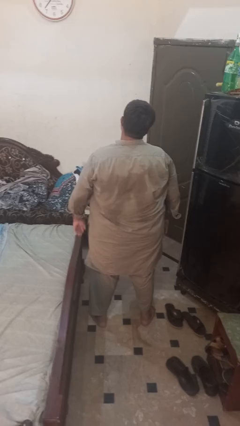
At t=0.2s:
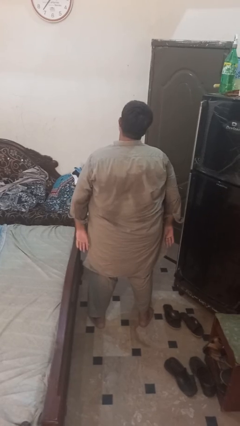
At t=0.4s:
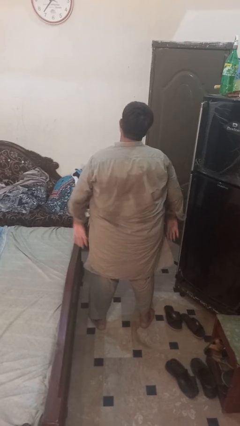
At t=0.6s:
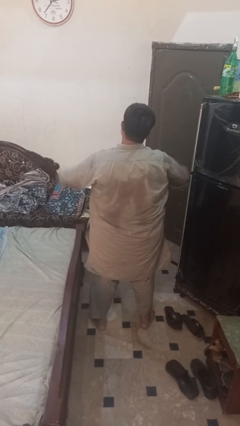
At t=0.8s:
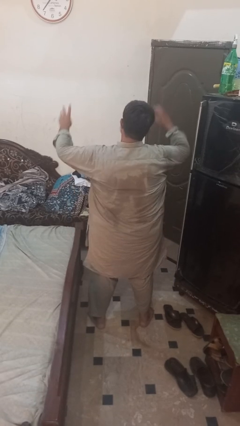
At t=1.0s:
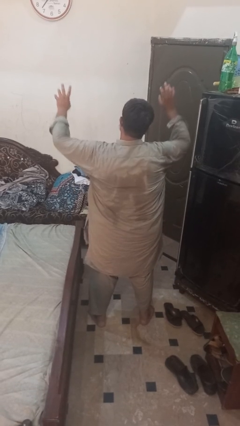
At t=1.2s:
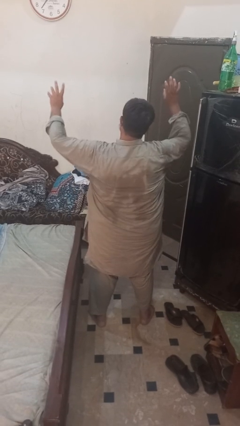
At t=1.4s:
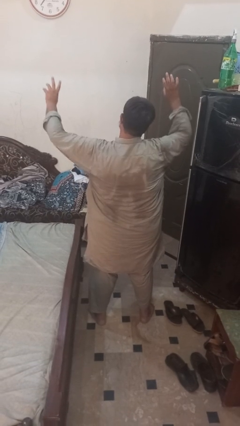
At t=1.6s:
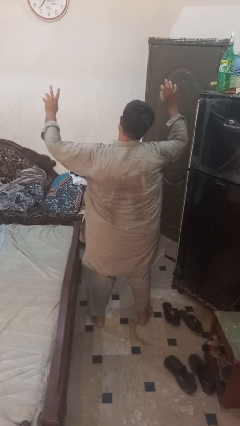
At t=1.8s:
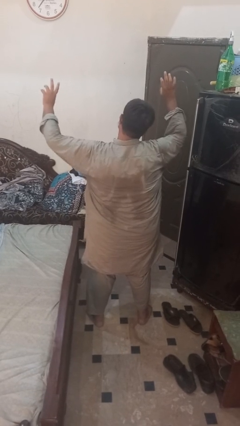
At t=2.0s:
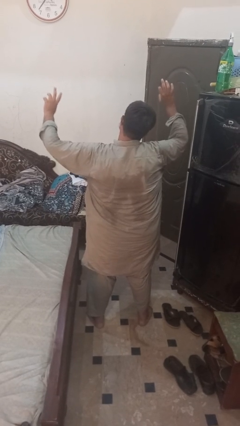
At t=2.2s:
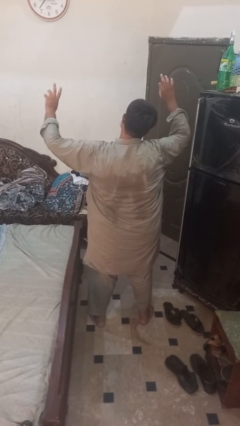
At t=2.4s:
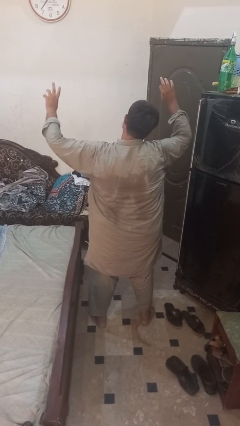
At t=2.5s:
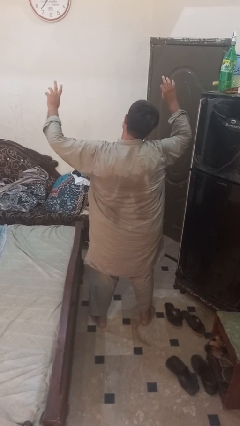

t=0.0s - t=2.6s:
person dances in place

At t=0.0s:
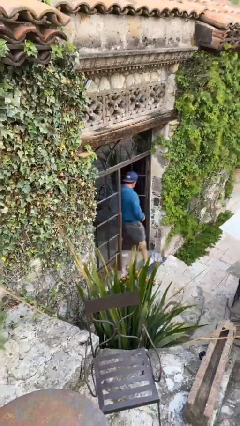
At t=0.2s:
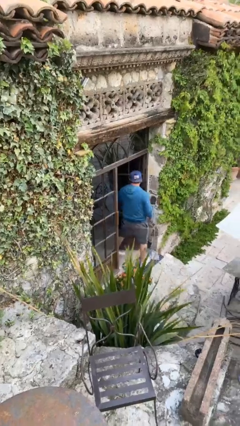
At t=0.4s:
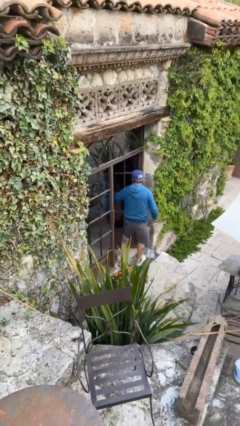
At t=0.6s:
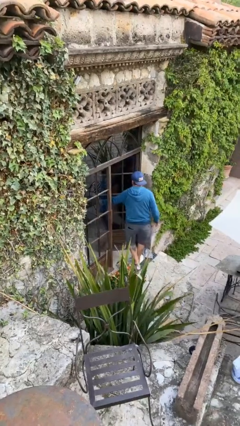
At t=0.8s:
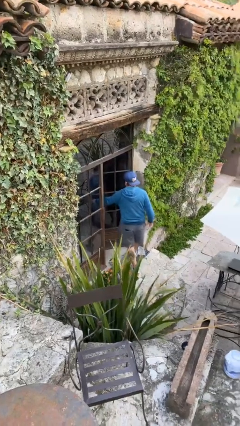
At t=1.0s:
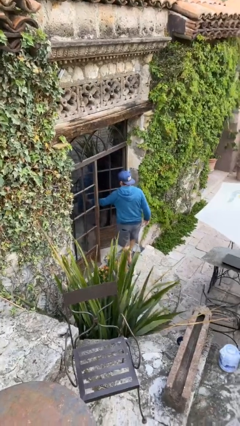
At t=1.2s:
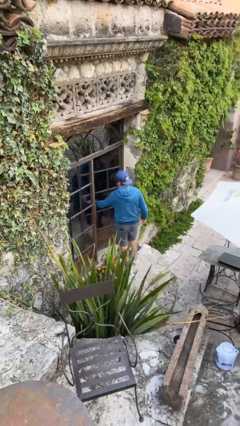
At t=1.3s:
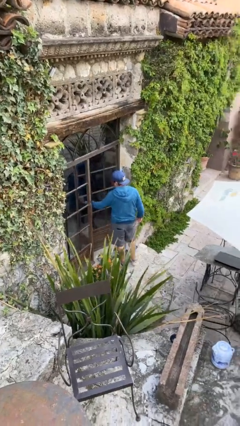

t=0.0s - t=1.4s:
person enters scene through structure

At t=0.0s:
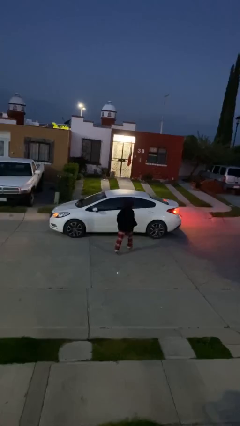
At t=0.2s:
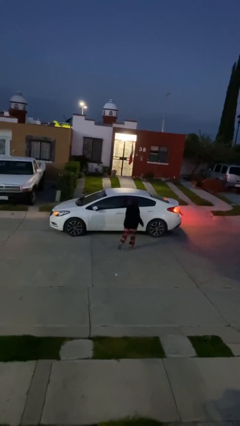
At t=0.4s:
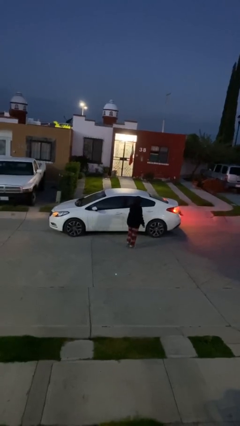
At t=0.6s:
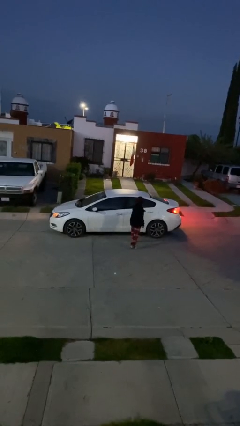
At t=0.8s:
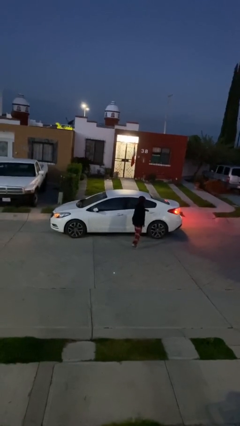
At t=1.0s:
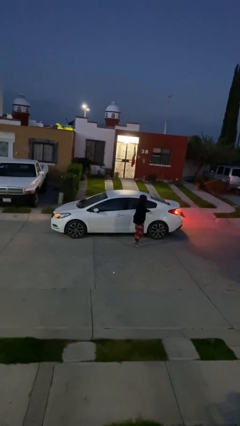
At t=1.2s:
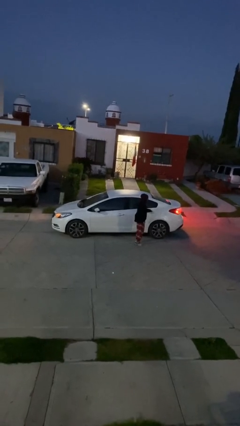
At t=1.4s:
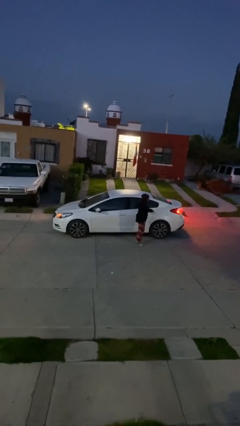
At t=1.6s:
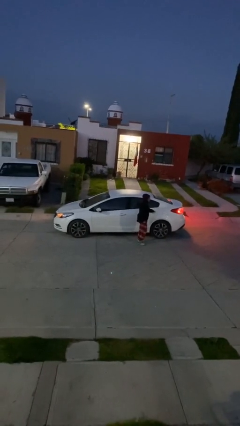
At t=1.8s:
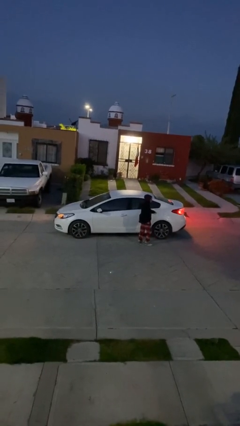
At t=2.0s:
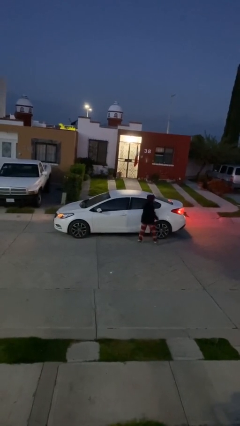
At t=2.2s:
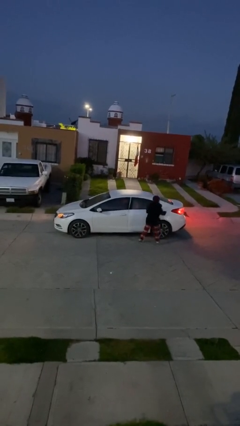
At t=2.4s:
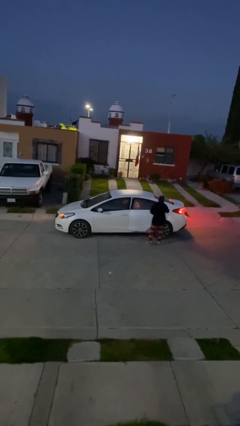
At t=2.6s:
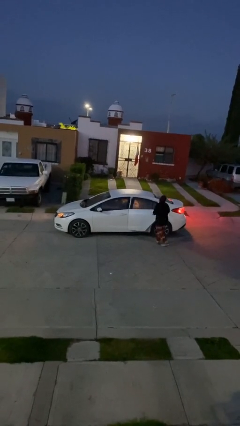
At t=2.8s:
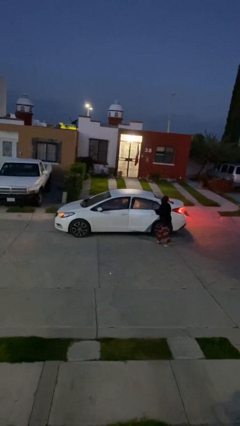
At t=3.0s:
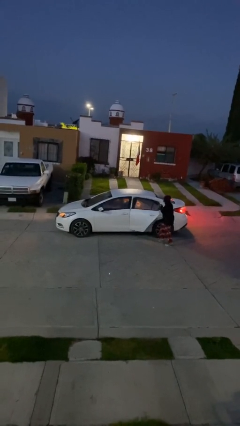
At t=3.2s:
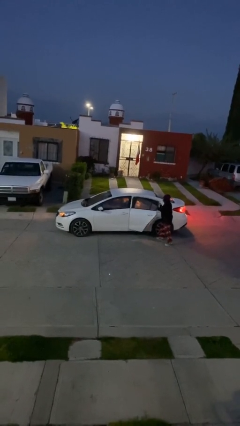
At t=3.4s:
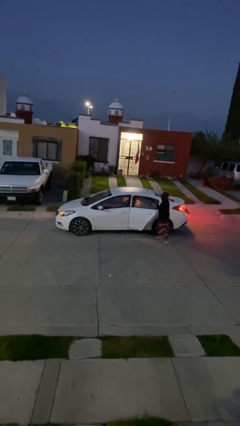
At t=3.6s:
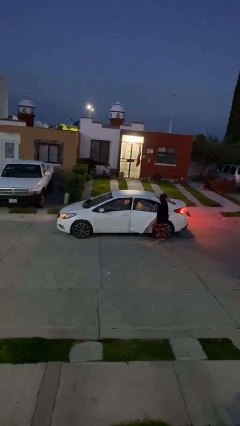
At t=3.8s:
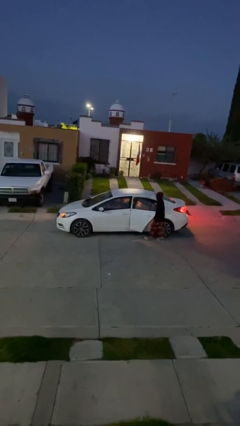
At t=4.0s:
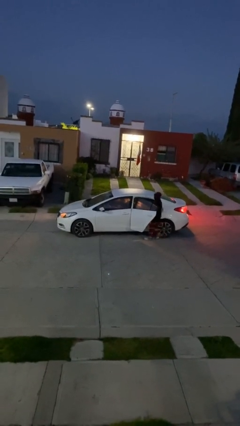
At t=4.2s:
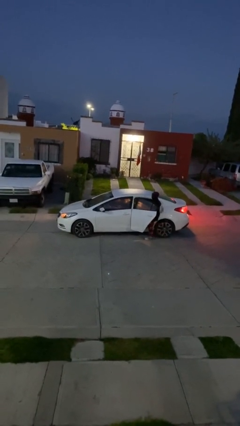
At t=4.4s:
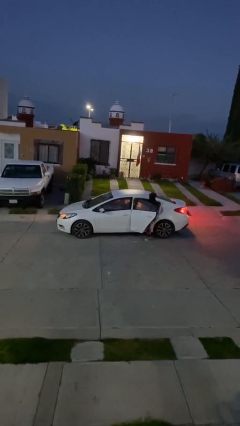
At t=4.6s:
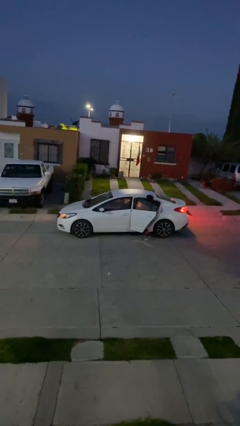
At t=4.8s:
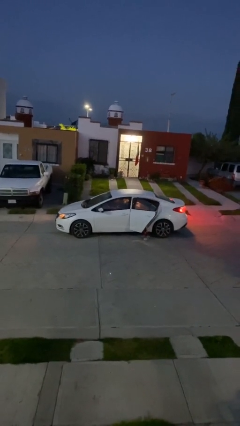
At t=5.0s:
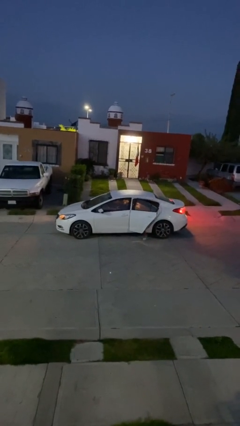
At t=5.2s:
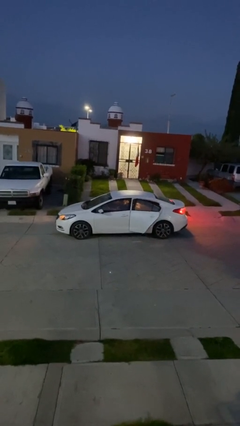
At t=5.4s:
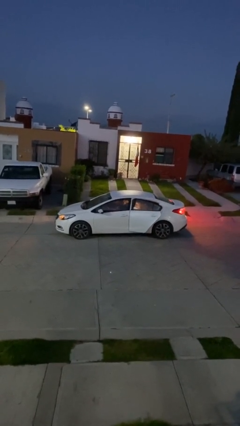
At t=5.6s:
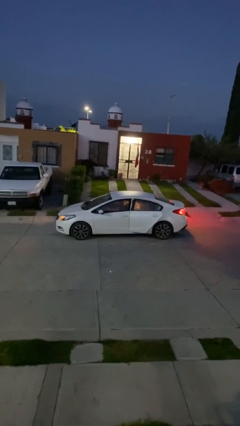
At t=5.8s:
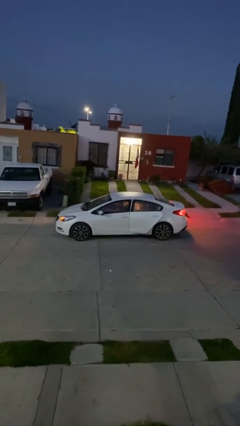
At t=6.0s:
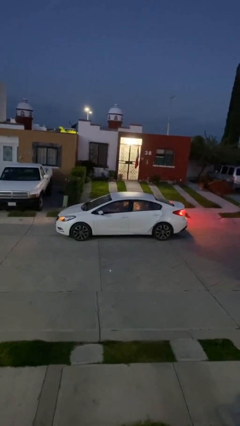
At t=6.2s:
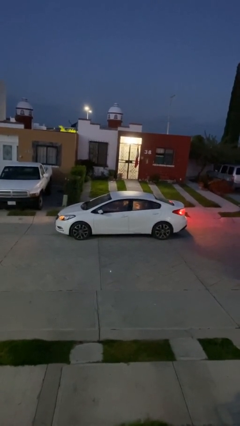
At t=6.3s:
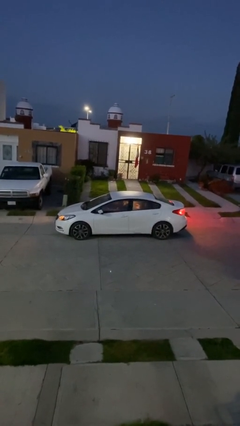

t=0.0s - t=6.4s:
car picks up person

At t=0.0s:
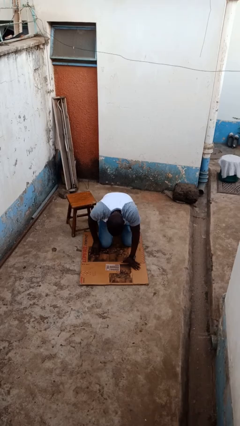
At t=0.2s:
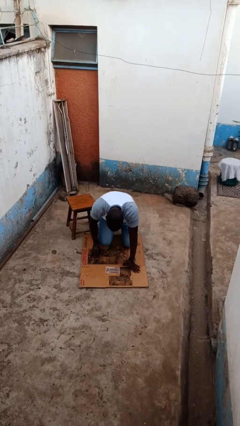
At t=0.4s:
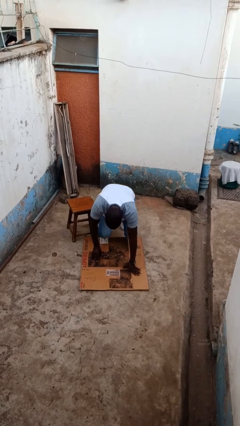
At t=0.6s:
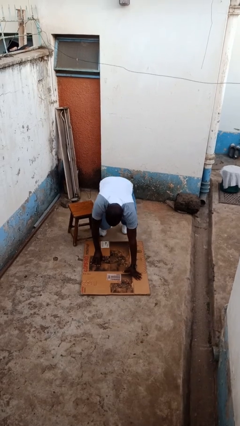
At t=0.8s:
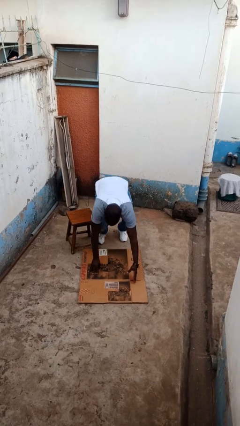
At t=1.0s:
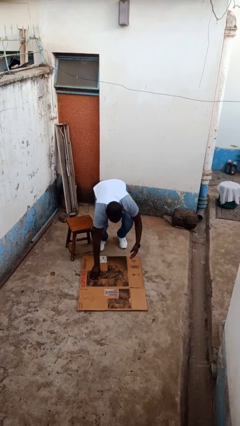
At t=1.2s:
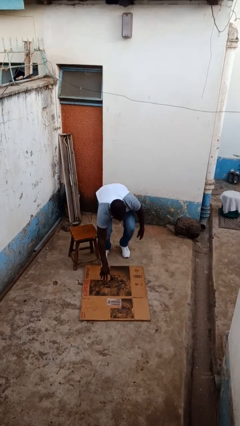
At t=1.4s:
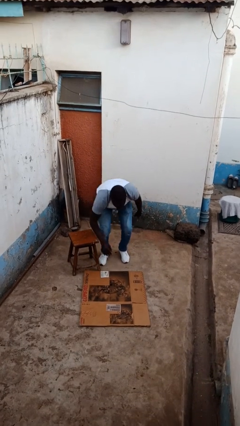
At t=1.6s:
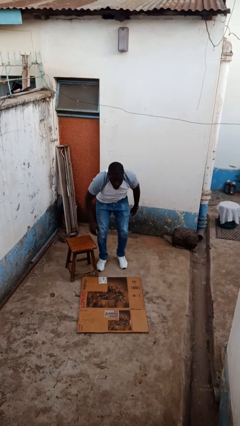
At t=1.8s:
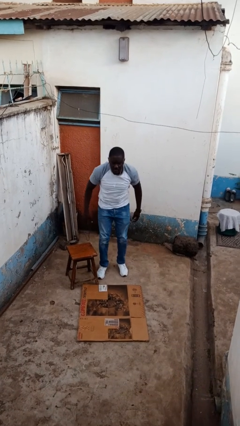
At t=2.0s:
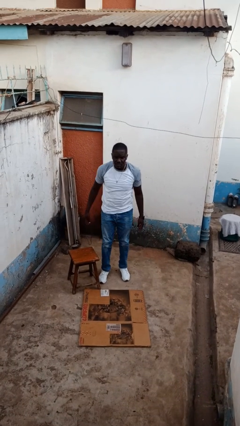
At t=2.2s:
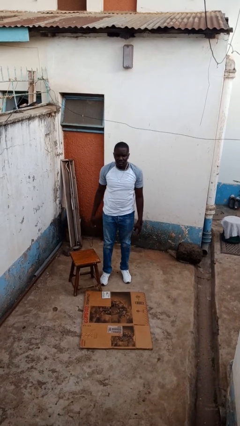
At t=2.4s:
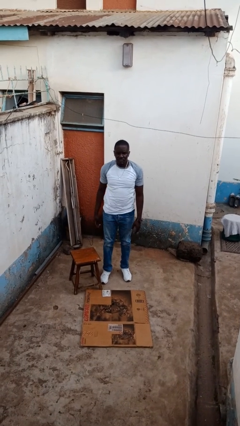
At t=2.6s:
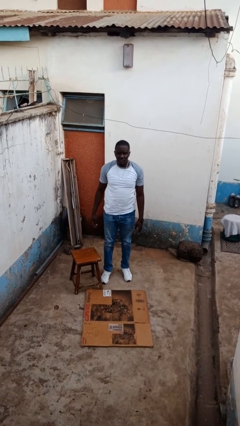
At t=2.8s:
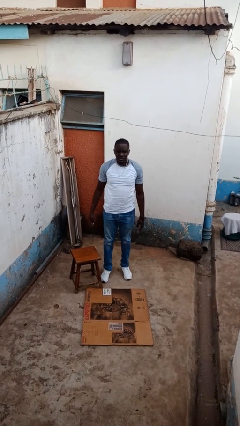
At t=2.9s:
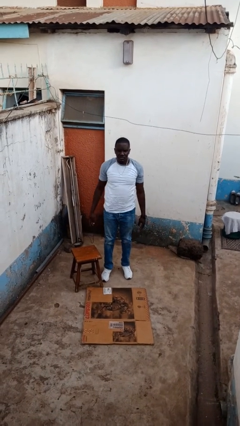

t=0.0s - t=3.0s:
person stands up from floor

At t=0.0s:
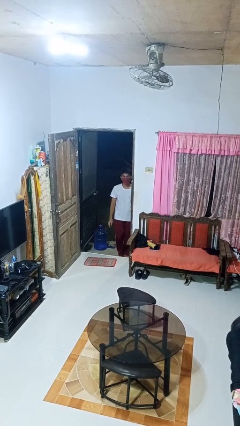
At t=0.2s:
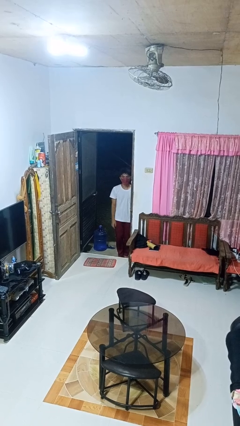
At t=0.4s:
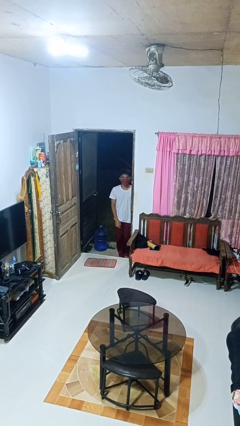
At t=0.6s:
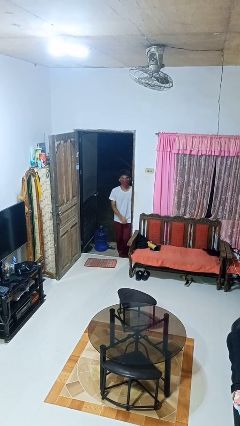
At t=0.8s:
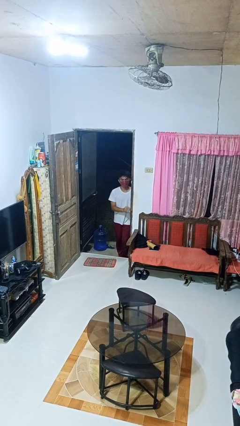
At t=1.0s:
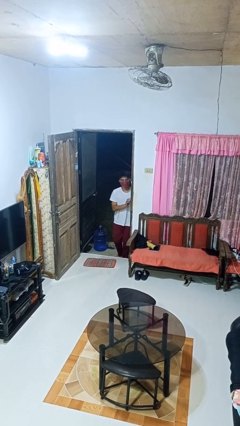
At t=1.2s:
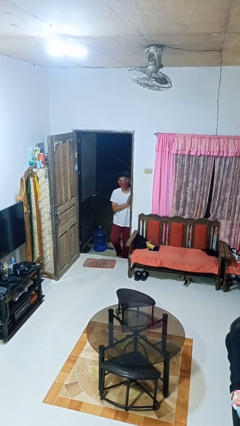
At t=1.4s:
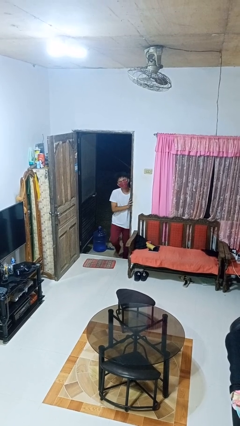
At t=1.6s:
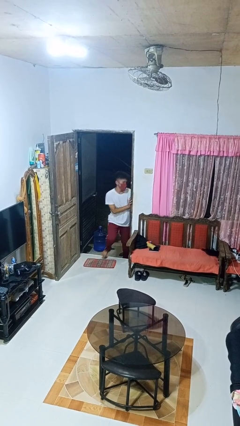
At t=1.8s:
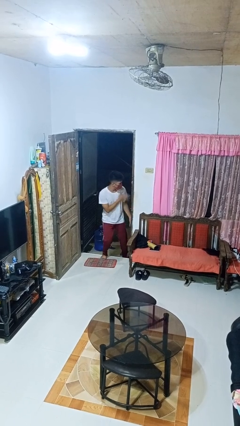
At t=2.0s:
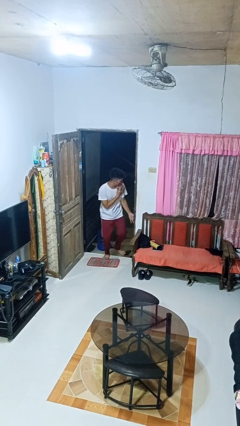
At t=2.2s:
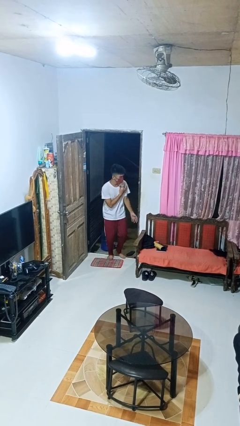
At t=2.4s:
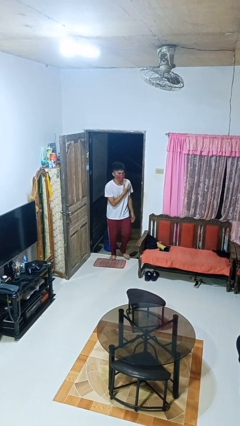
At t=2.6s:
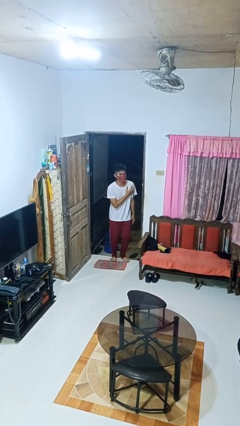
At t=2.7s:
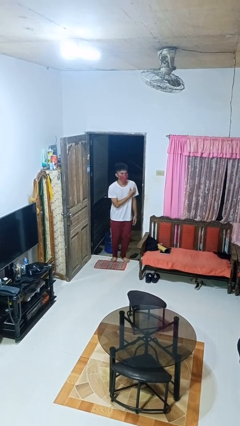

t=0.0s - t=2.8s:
person bumps into wall

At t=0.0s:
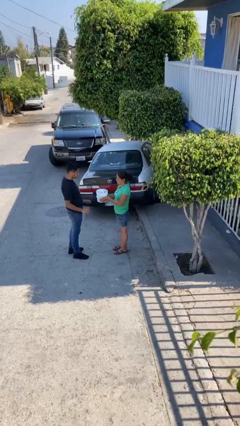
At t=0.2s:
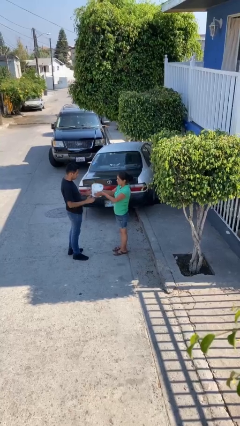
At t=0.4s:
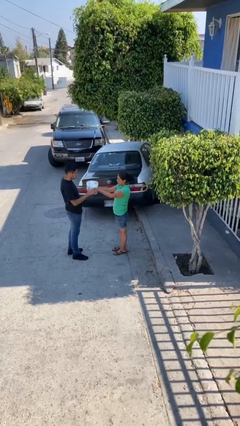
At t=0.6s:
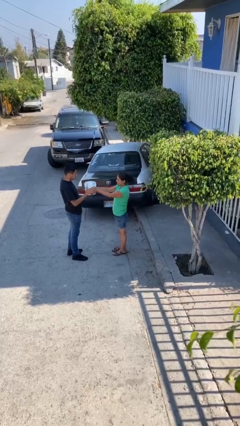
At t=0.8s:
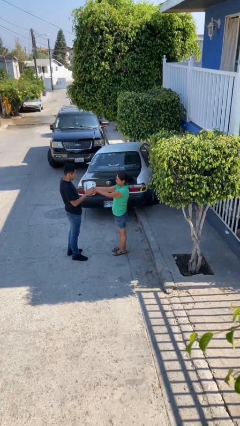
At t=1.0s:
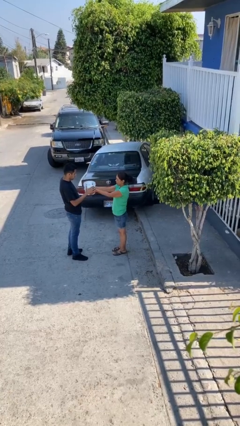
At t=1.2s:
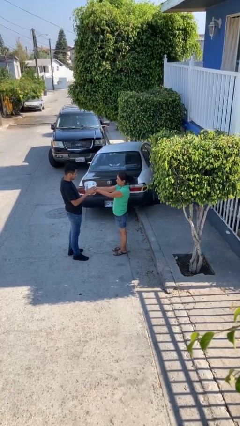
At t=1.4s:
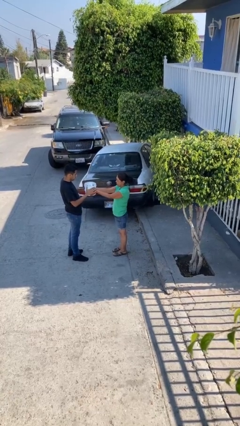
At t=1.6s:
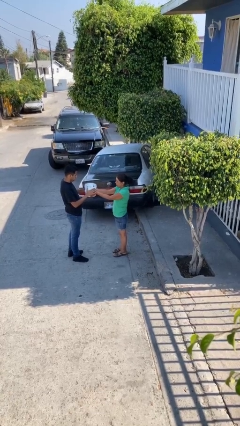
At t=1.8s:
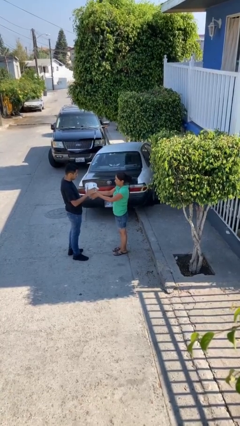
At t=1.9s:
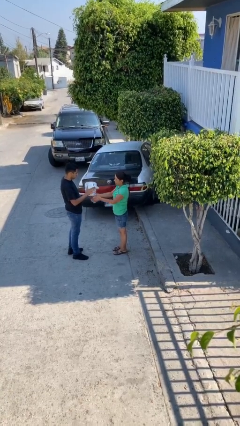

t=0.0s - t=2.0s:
person transfers object to person
